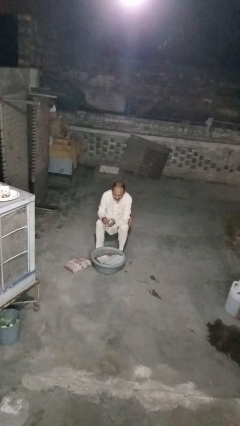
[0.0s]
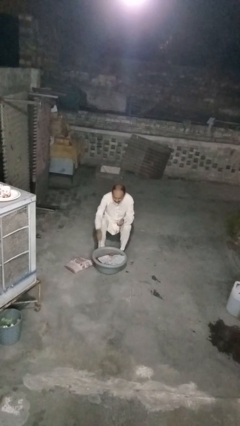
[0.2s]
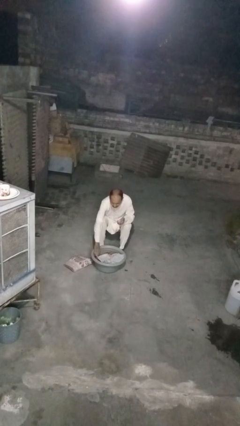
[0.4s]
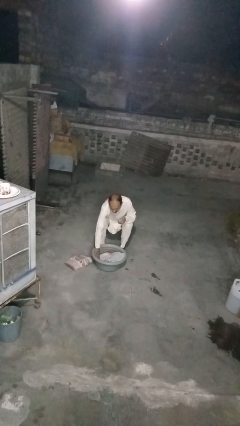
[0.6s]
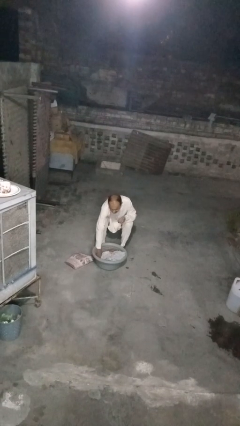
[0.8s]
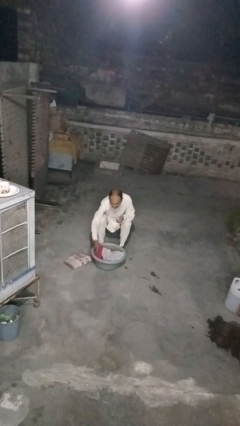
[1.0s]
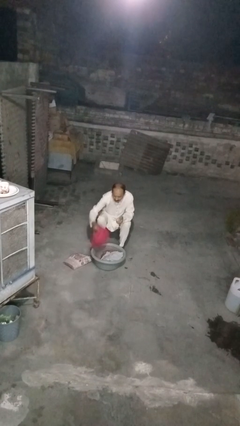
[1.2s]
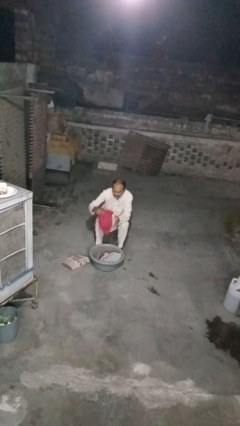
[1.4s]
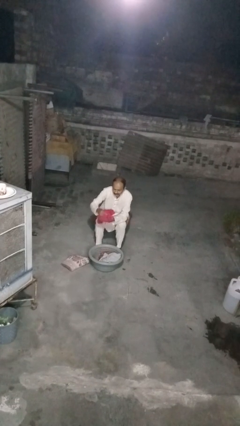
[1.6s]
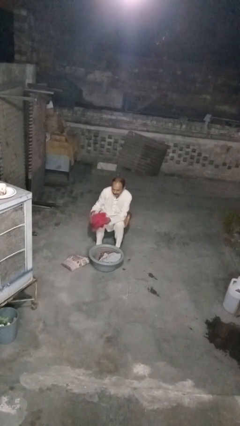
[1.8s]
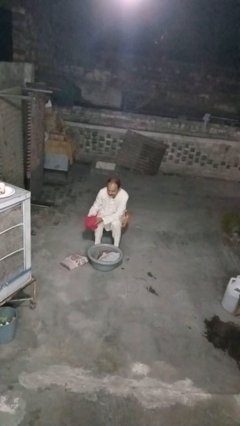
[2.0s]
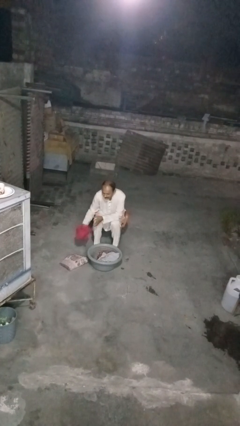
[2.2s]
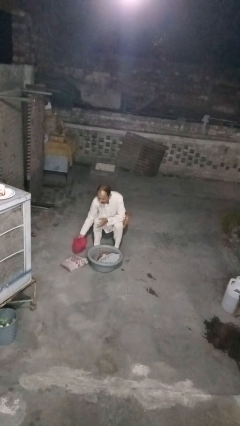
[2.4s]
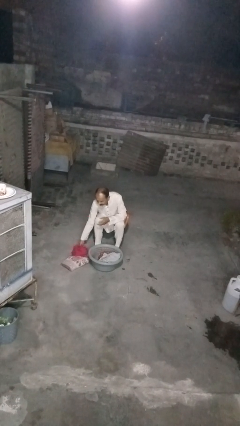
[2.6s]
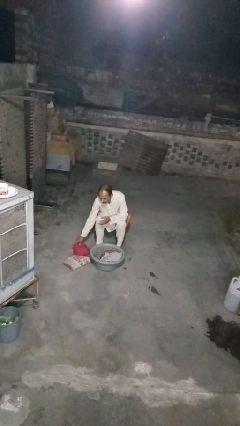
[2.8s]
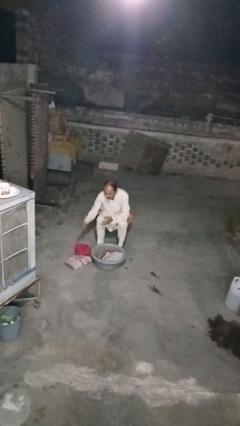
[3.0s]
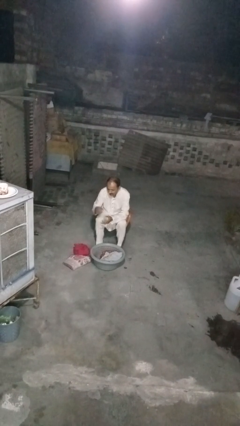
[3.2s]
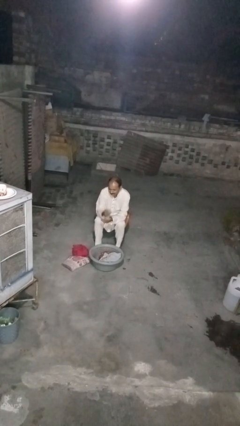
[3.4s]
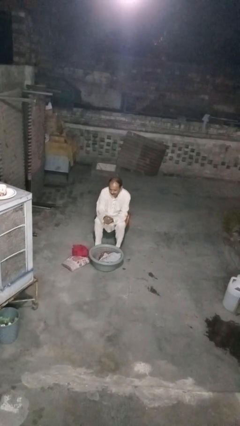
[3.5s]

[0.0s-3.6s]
person takes object from basket

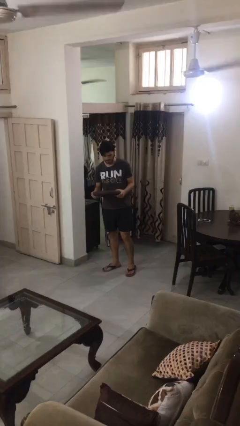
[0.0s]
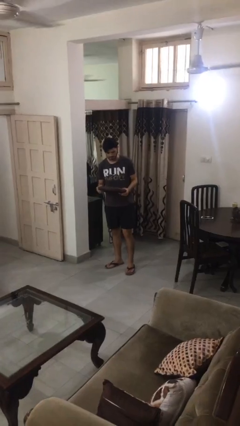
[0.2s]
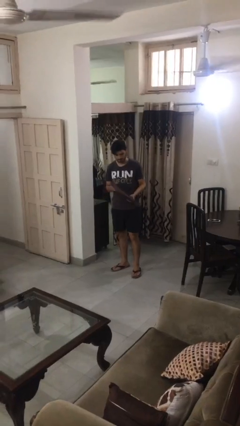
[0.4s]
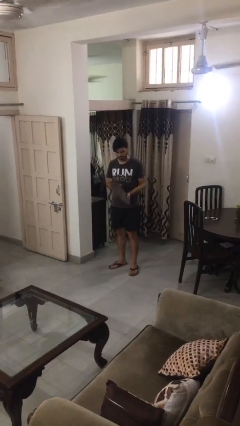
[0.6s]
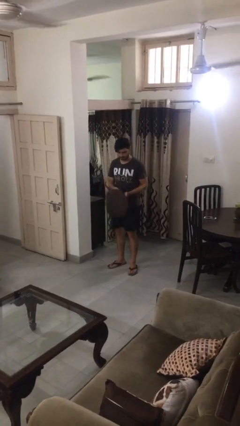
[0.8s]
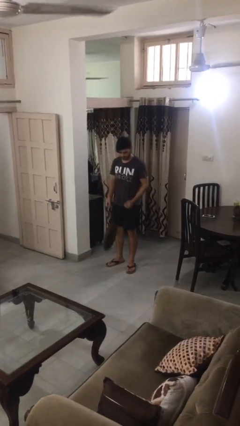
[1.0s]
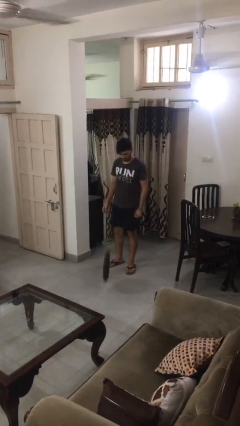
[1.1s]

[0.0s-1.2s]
person drops object

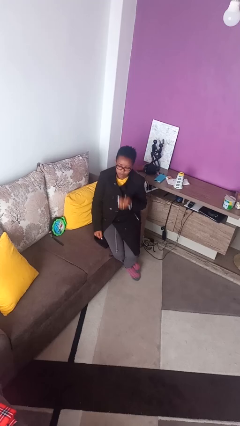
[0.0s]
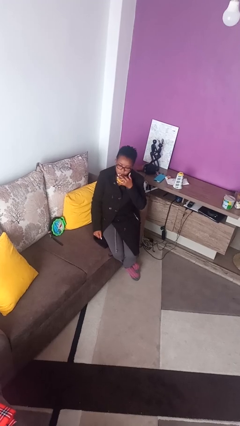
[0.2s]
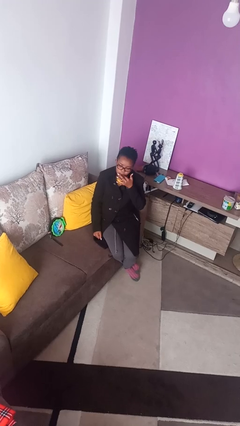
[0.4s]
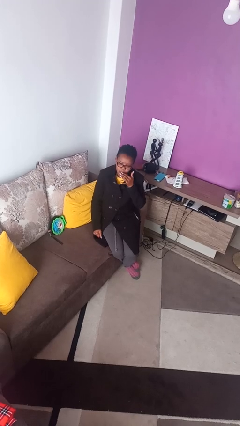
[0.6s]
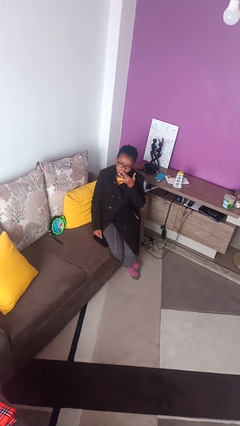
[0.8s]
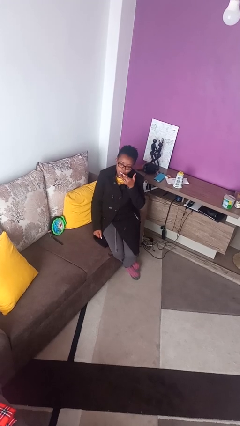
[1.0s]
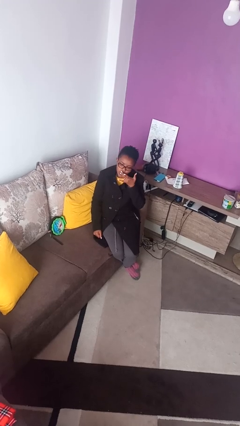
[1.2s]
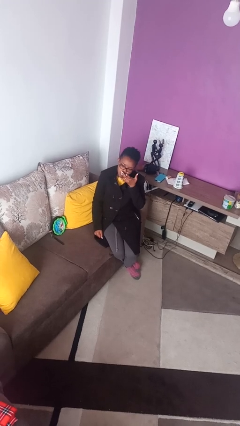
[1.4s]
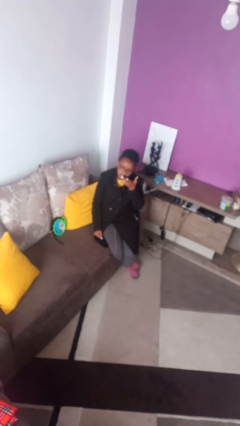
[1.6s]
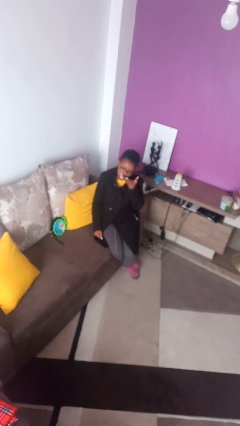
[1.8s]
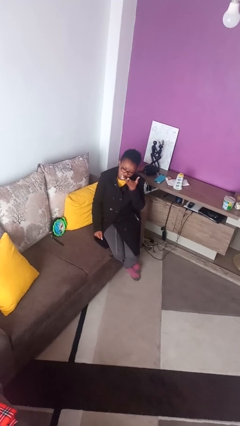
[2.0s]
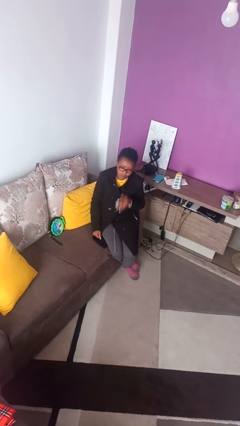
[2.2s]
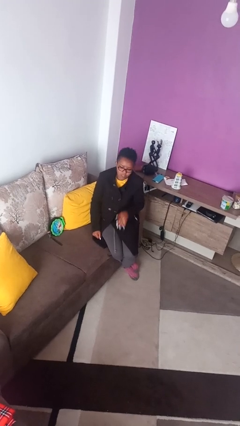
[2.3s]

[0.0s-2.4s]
person licks fingers

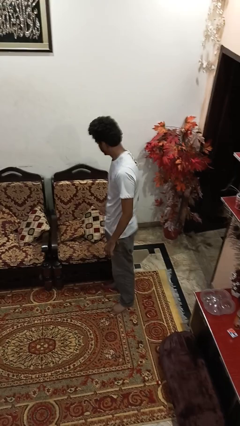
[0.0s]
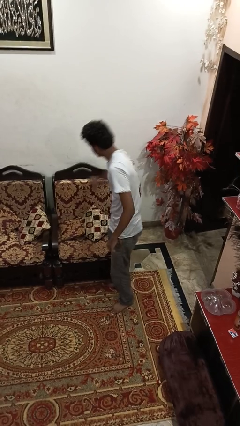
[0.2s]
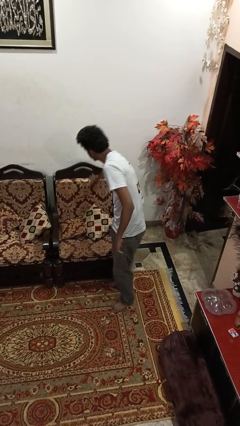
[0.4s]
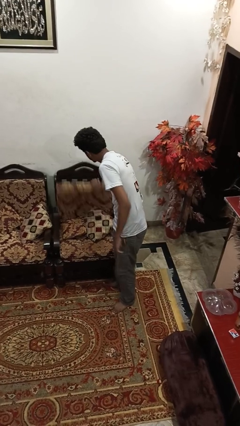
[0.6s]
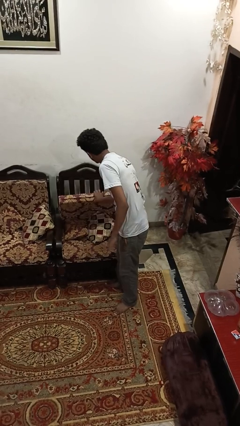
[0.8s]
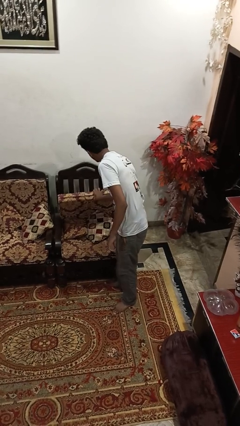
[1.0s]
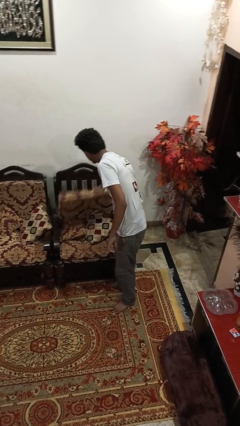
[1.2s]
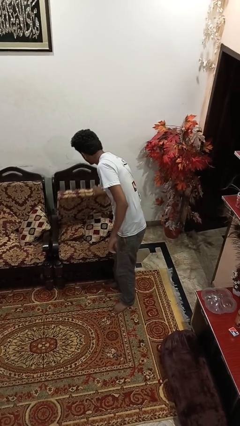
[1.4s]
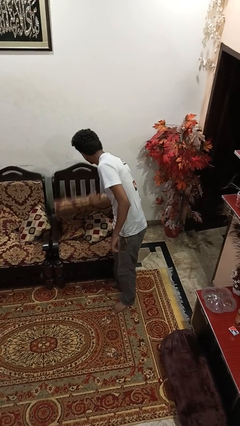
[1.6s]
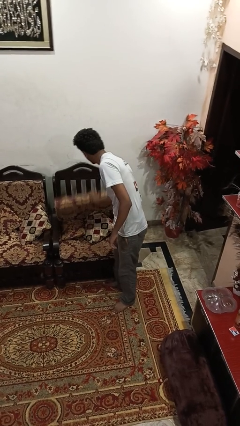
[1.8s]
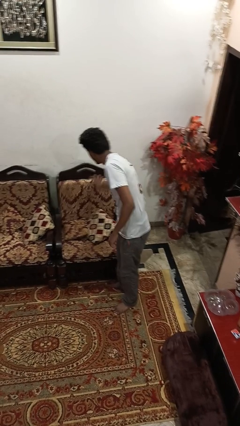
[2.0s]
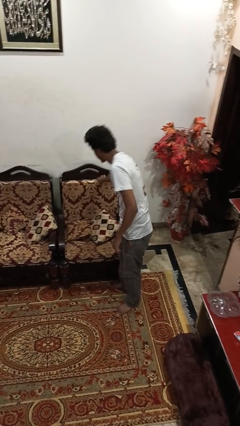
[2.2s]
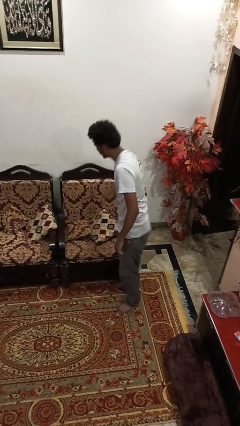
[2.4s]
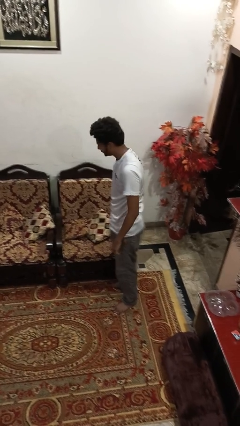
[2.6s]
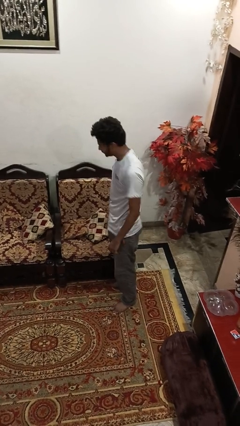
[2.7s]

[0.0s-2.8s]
person searches in couch

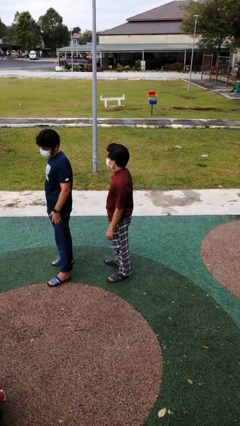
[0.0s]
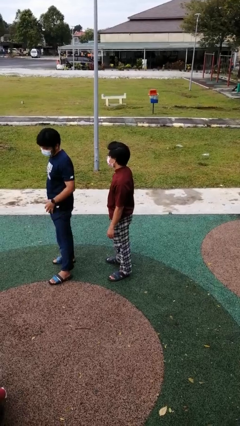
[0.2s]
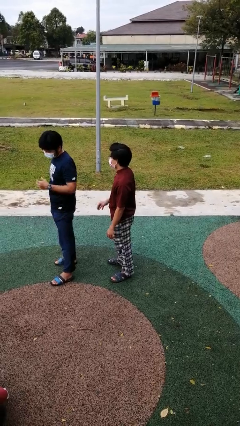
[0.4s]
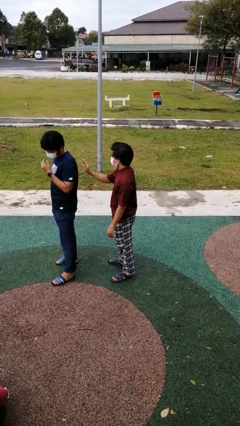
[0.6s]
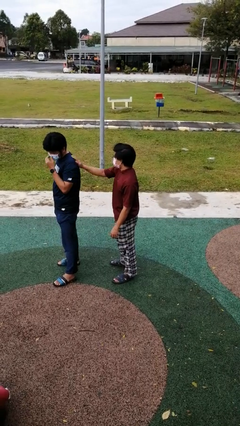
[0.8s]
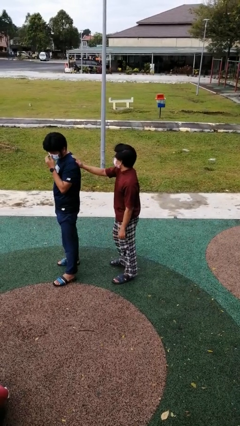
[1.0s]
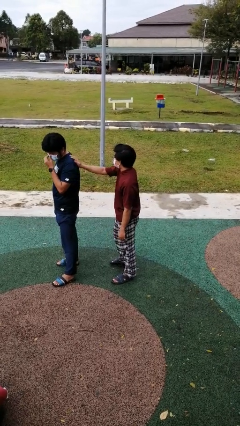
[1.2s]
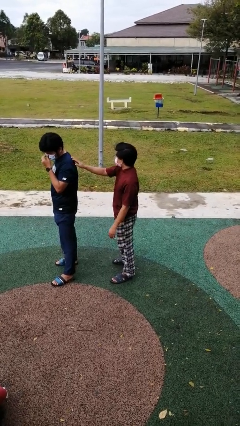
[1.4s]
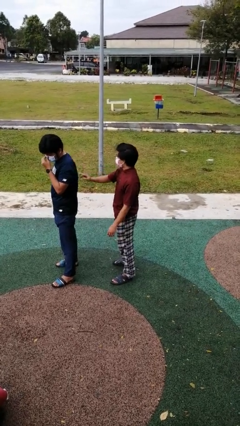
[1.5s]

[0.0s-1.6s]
person touches back of person

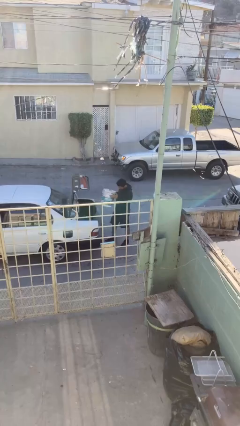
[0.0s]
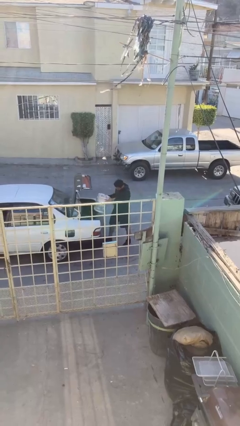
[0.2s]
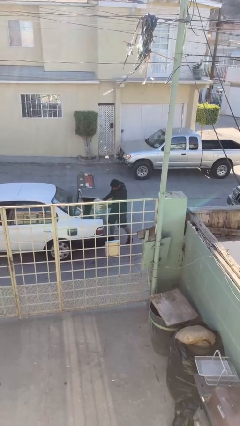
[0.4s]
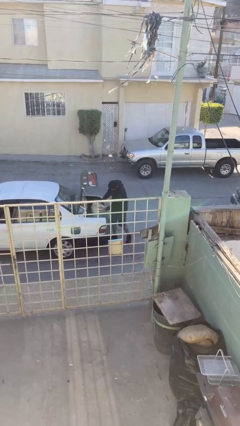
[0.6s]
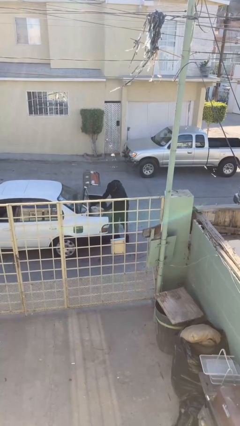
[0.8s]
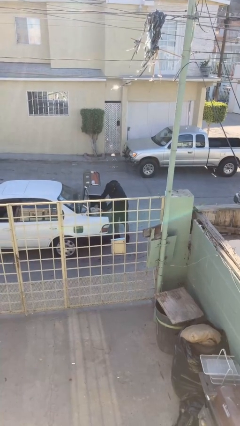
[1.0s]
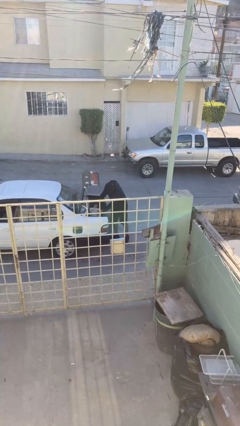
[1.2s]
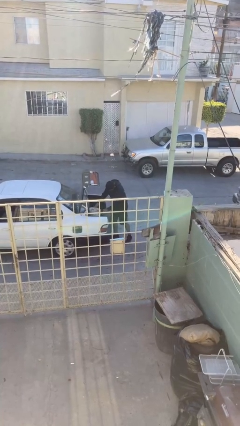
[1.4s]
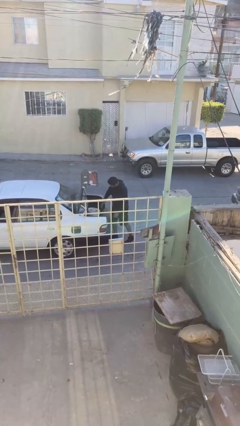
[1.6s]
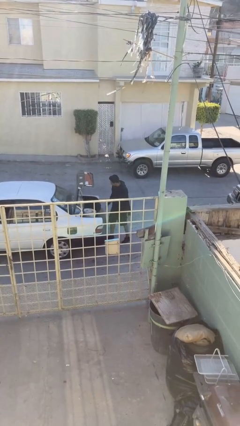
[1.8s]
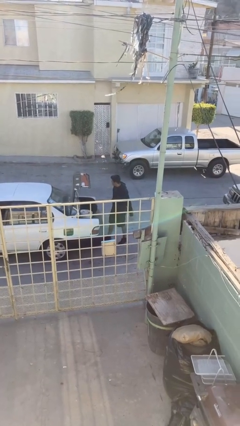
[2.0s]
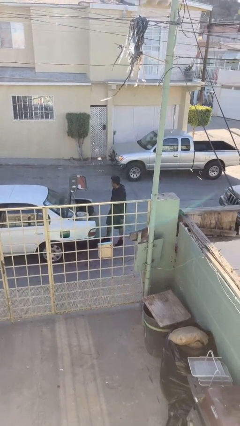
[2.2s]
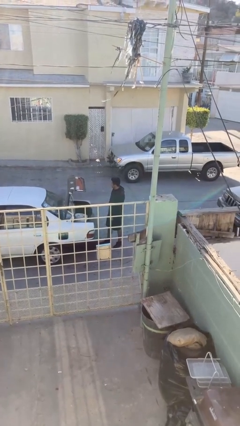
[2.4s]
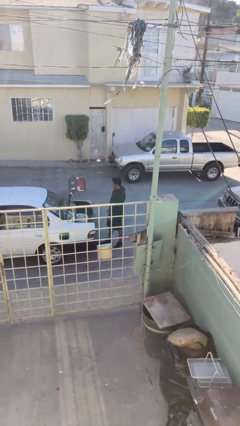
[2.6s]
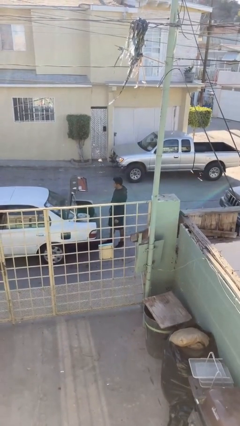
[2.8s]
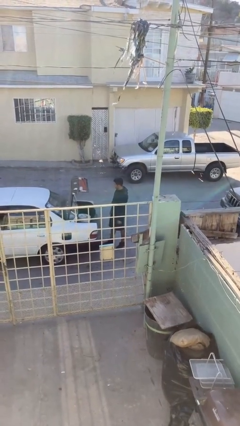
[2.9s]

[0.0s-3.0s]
person loads car

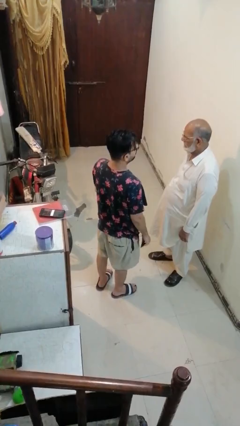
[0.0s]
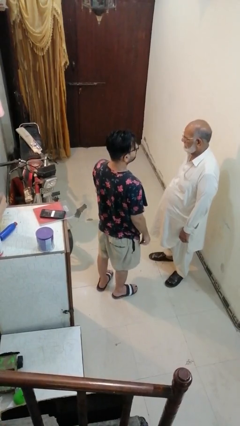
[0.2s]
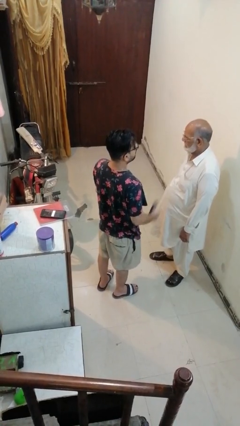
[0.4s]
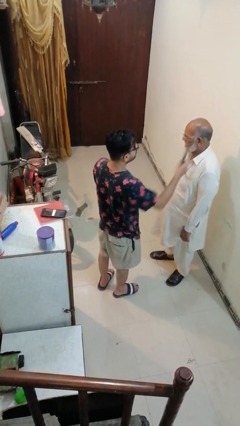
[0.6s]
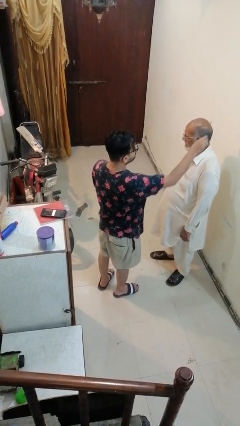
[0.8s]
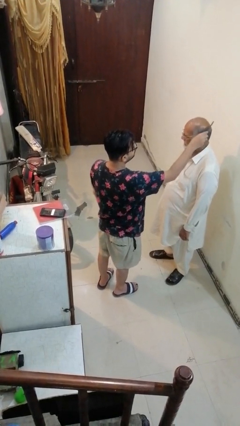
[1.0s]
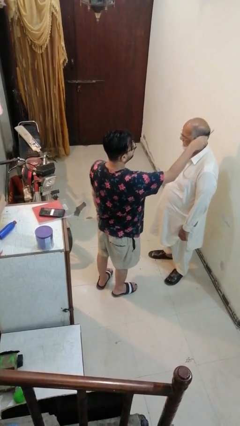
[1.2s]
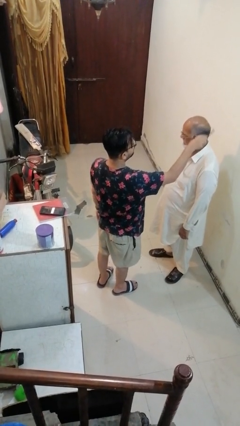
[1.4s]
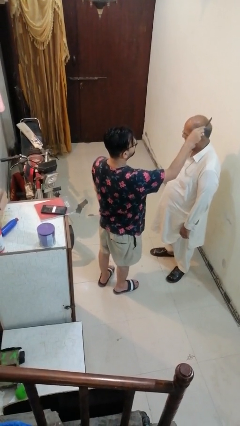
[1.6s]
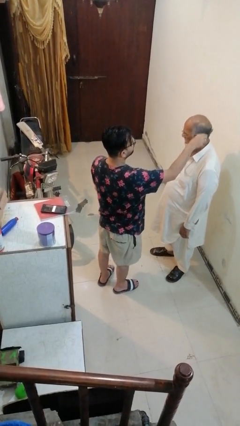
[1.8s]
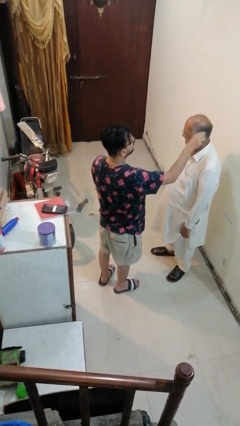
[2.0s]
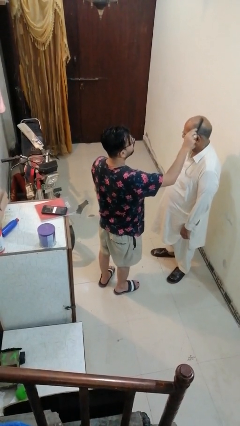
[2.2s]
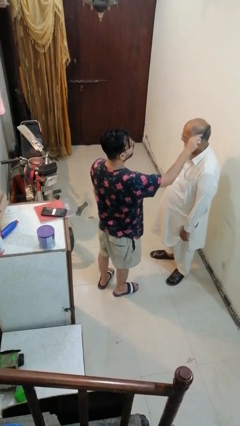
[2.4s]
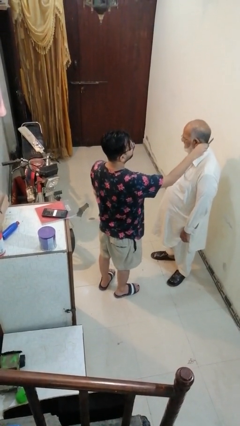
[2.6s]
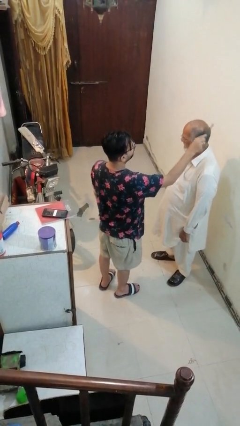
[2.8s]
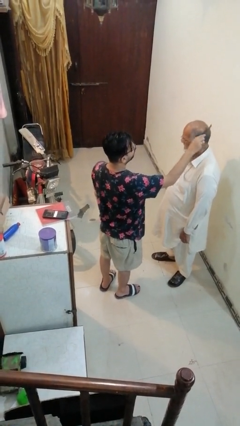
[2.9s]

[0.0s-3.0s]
person brushes hair of person
